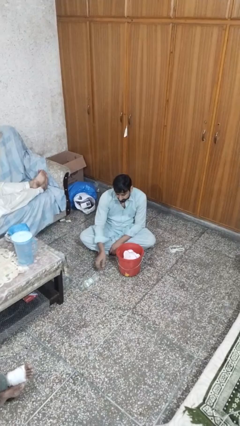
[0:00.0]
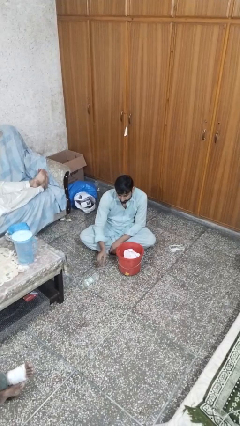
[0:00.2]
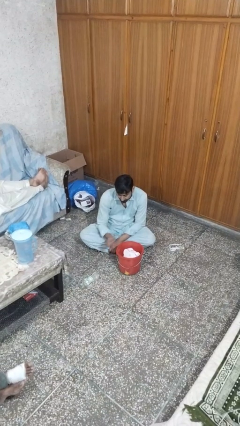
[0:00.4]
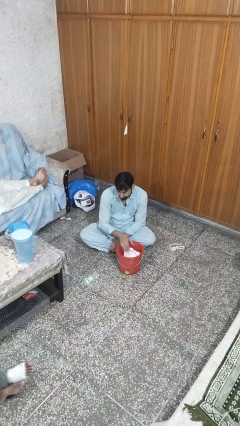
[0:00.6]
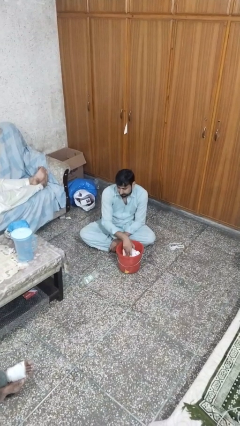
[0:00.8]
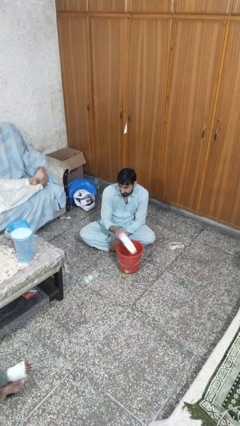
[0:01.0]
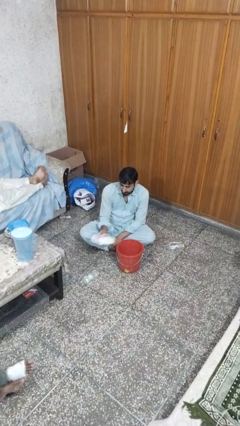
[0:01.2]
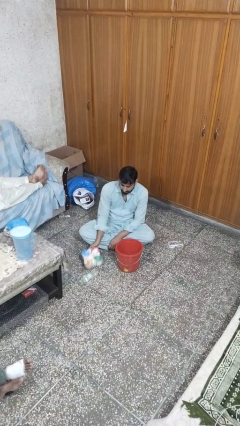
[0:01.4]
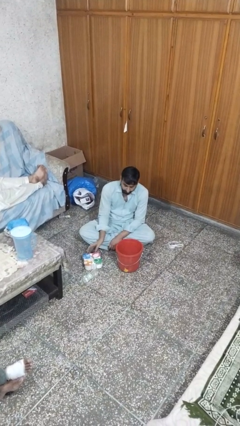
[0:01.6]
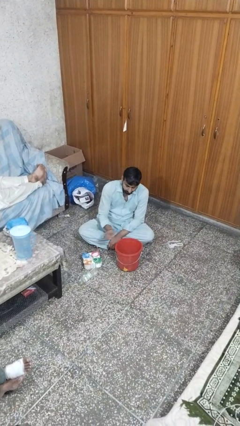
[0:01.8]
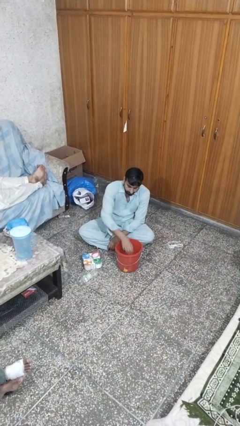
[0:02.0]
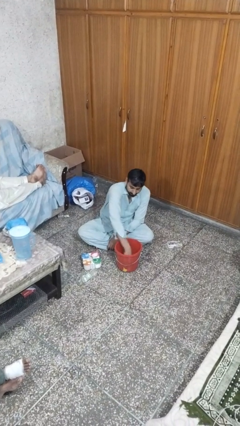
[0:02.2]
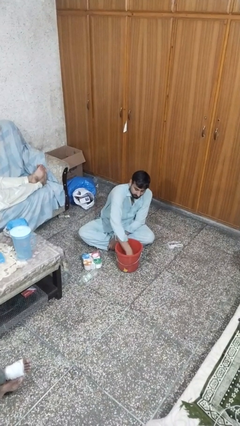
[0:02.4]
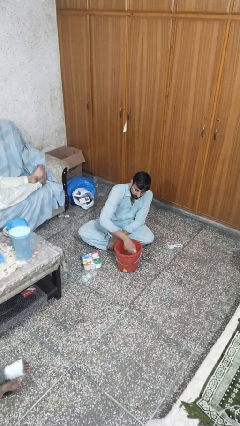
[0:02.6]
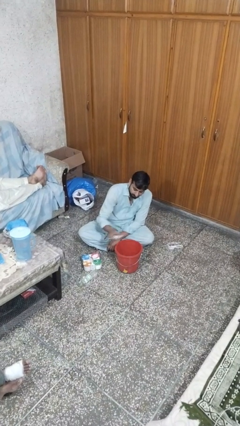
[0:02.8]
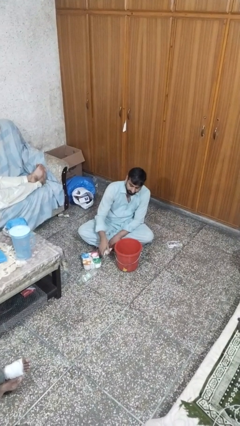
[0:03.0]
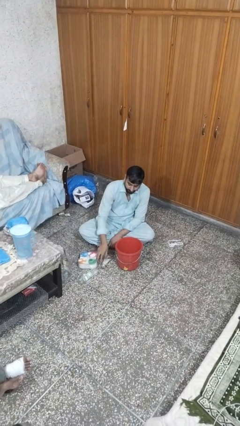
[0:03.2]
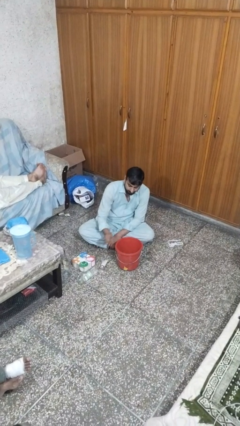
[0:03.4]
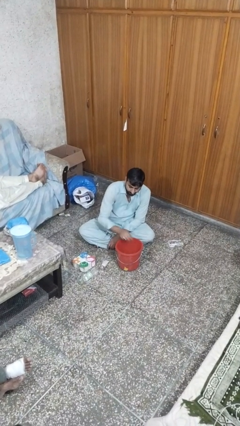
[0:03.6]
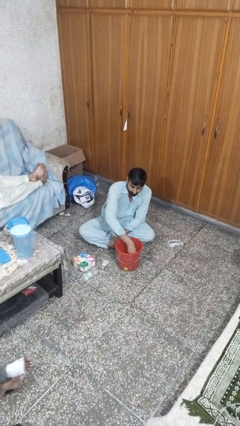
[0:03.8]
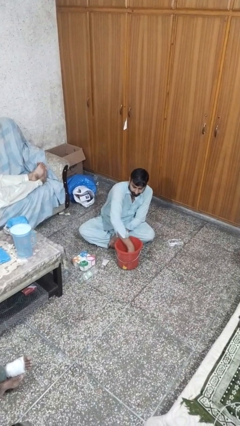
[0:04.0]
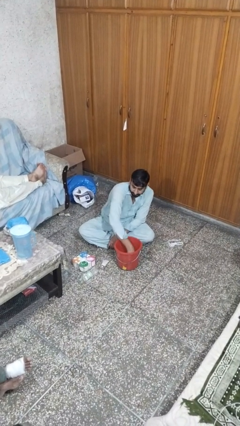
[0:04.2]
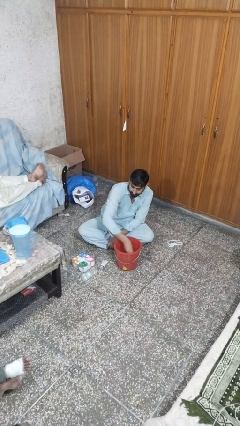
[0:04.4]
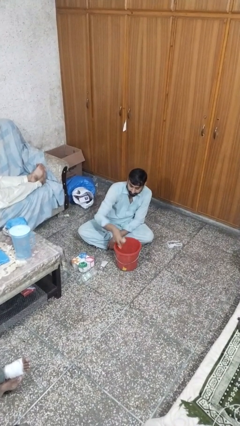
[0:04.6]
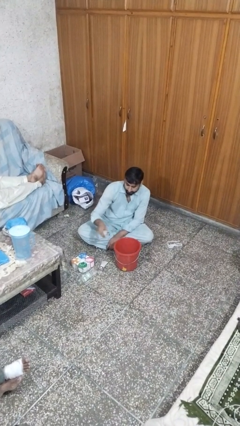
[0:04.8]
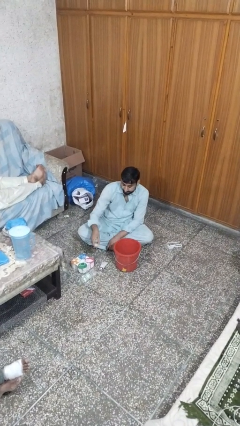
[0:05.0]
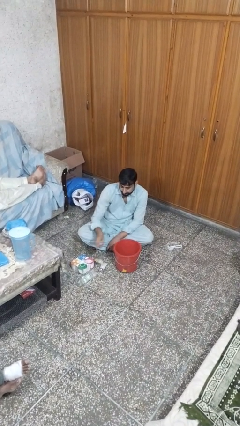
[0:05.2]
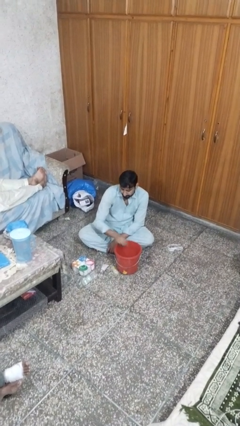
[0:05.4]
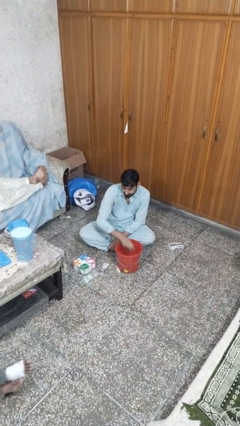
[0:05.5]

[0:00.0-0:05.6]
person takes object from basket

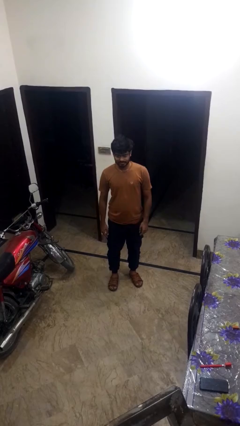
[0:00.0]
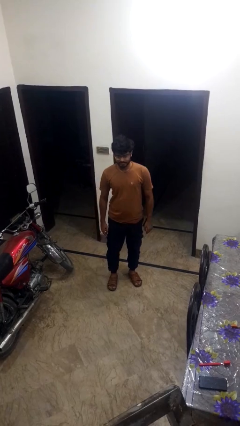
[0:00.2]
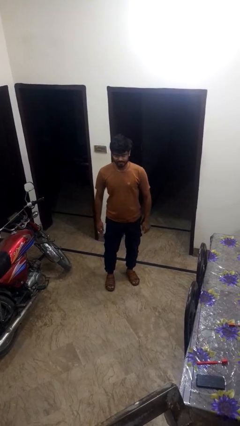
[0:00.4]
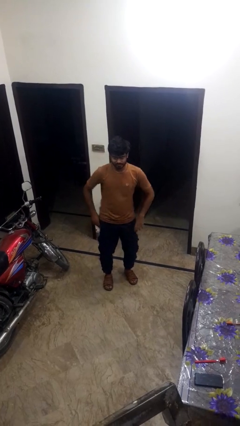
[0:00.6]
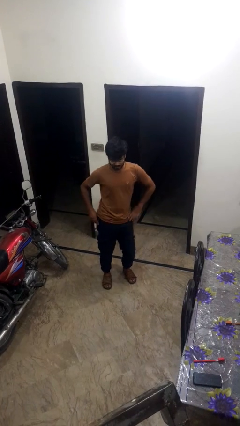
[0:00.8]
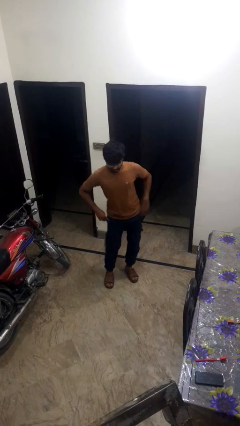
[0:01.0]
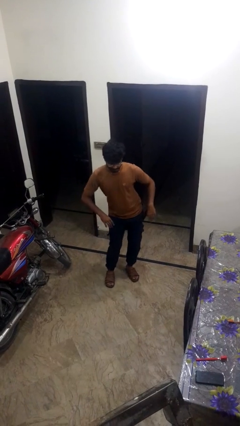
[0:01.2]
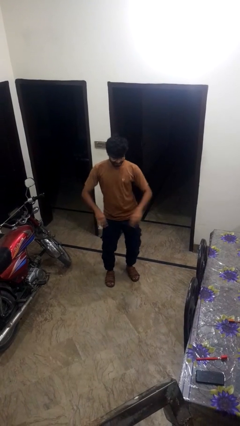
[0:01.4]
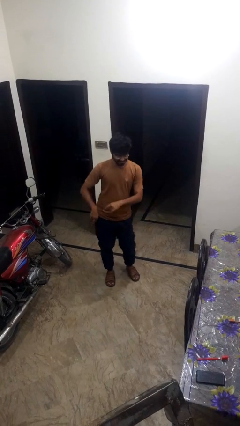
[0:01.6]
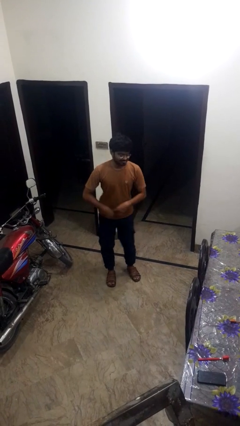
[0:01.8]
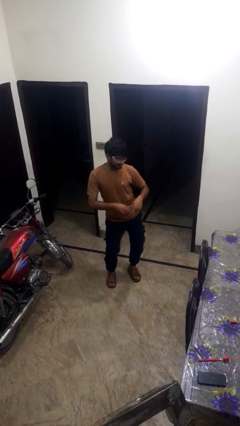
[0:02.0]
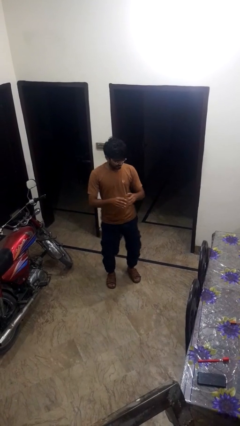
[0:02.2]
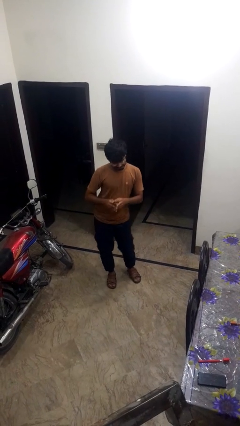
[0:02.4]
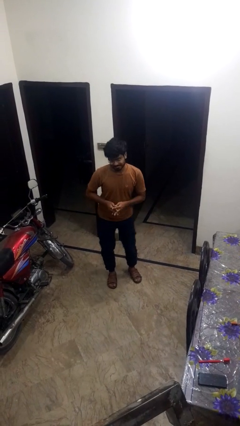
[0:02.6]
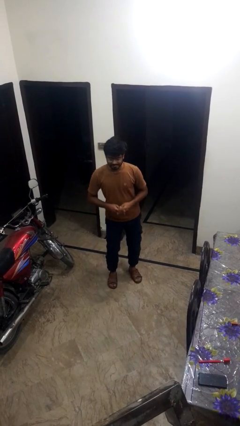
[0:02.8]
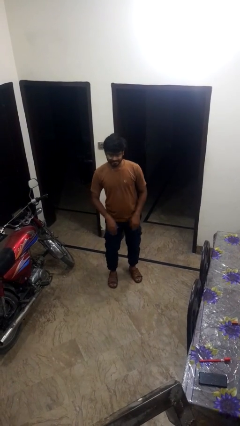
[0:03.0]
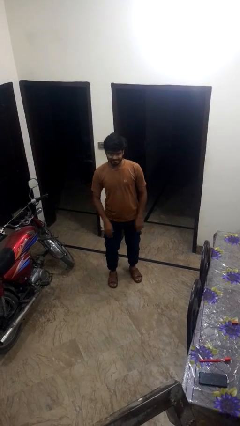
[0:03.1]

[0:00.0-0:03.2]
person wiggles hips

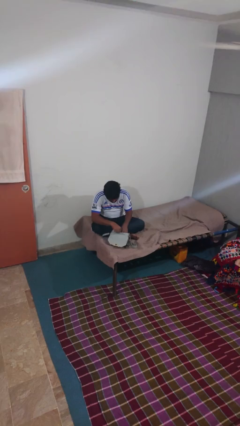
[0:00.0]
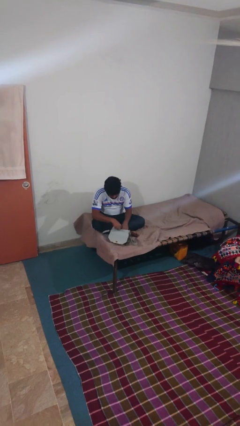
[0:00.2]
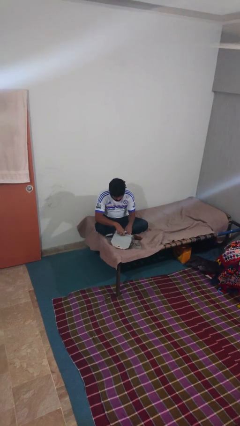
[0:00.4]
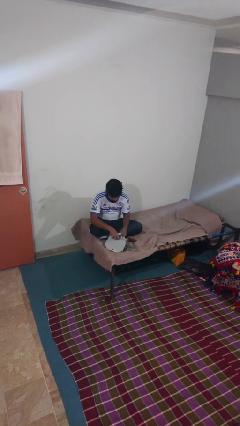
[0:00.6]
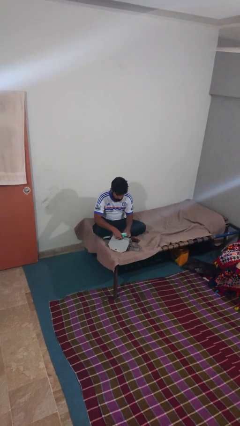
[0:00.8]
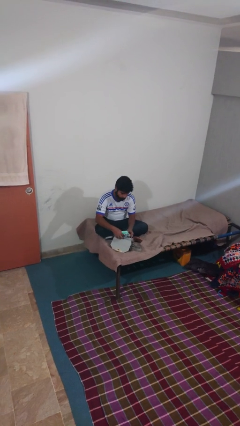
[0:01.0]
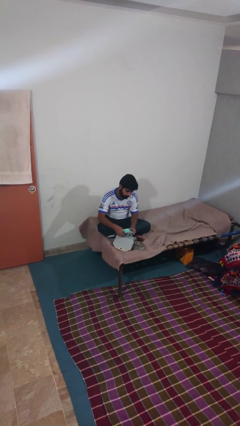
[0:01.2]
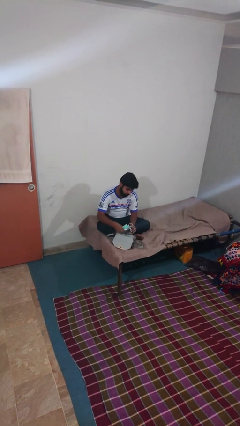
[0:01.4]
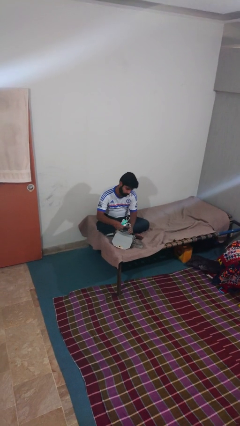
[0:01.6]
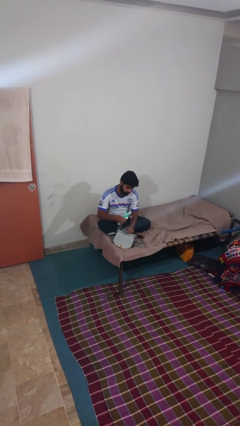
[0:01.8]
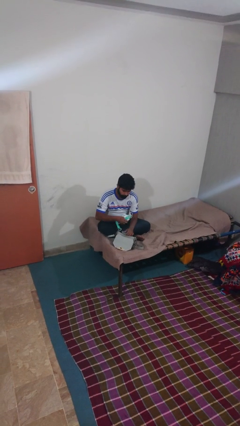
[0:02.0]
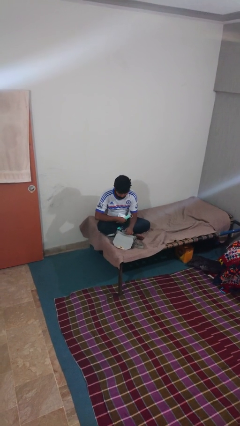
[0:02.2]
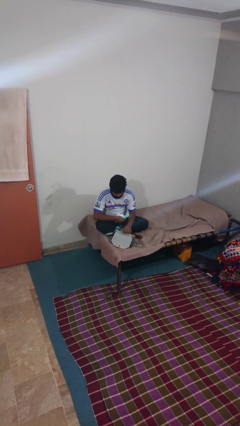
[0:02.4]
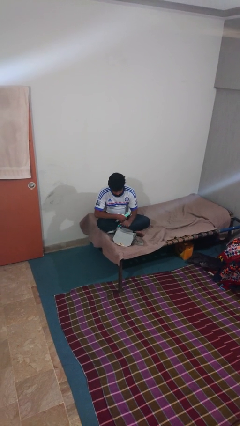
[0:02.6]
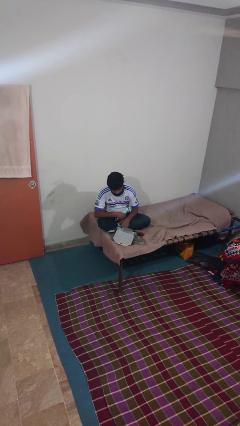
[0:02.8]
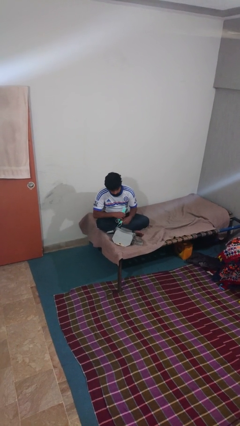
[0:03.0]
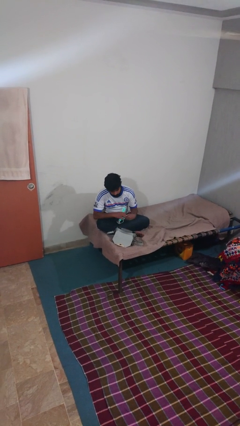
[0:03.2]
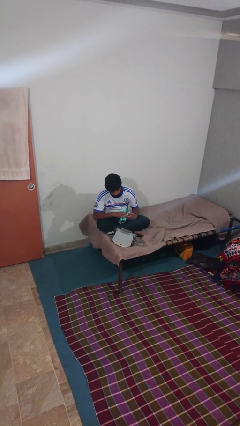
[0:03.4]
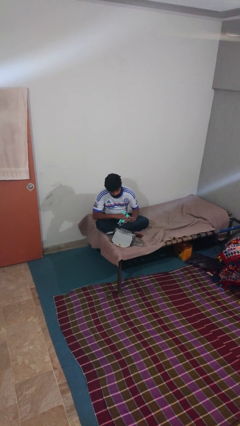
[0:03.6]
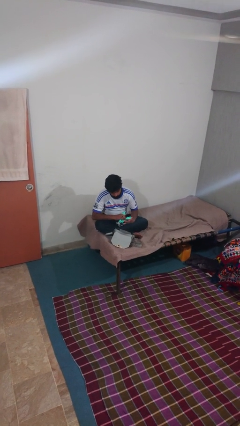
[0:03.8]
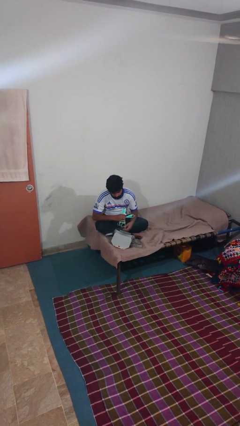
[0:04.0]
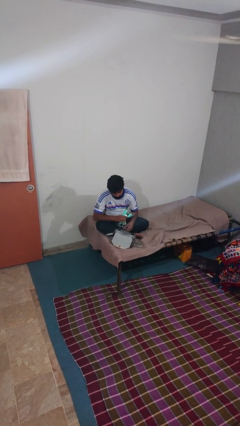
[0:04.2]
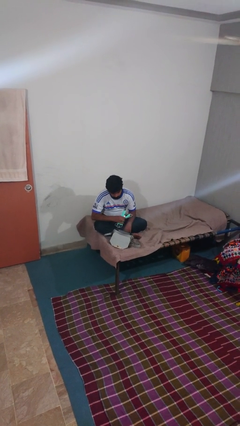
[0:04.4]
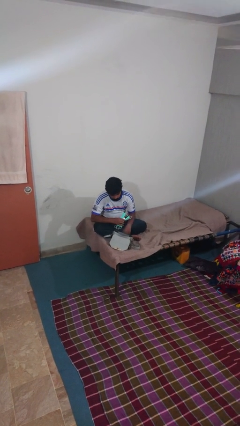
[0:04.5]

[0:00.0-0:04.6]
person takes object from purse

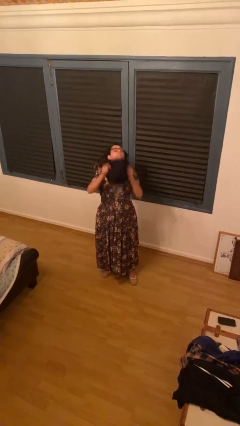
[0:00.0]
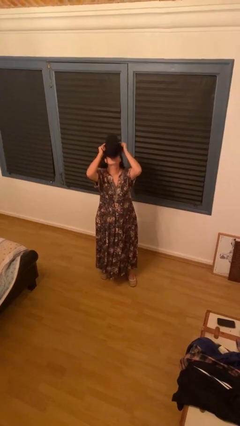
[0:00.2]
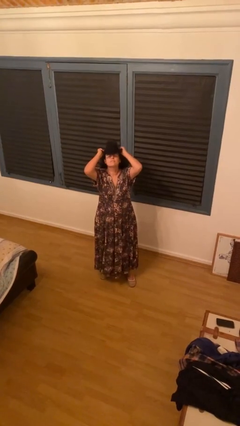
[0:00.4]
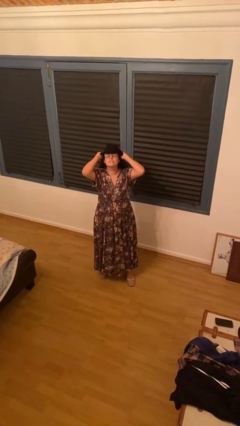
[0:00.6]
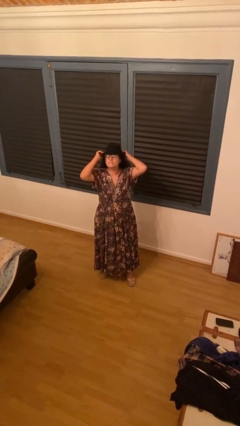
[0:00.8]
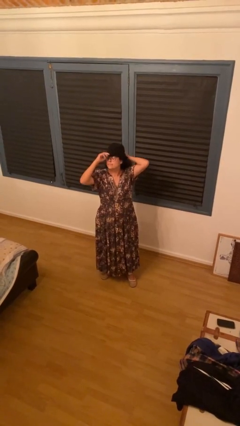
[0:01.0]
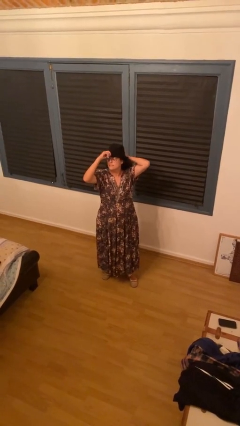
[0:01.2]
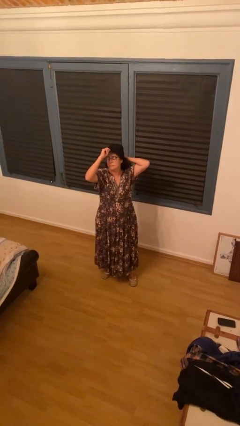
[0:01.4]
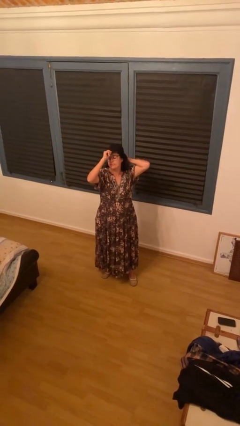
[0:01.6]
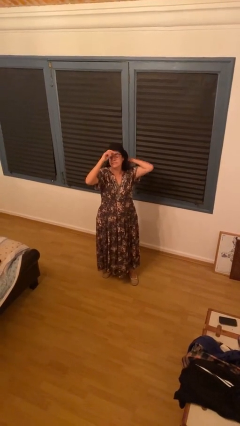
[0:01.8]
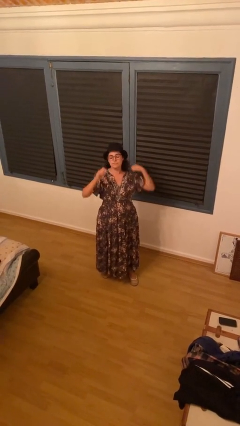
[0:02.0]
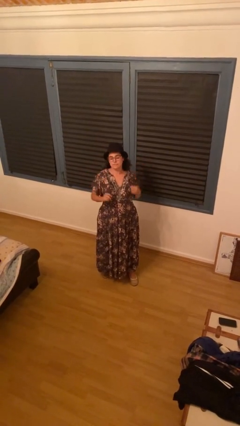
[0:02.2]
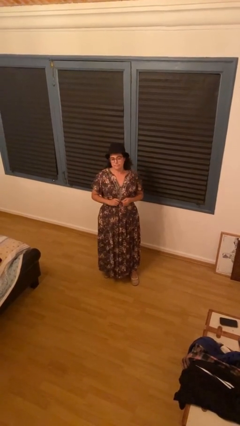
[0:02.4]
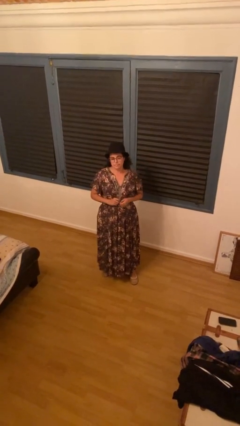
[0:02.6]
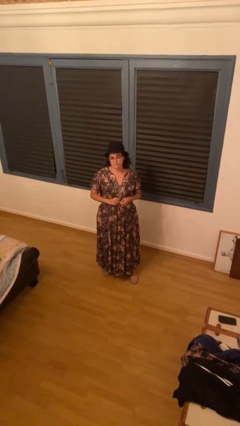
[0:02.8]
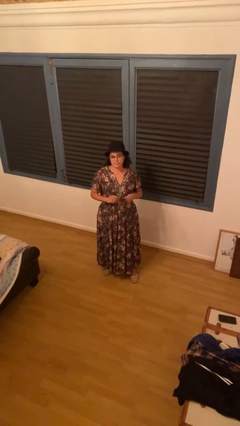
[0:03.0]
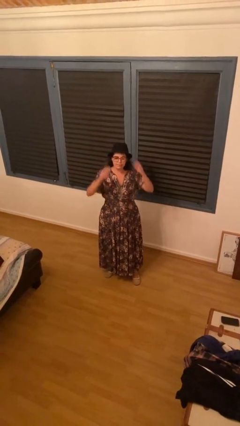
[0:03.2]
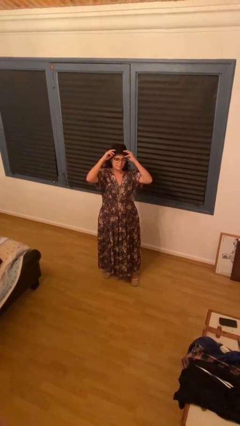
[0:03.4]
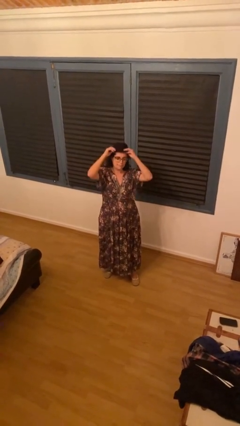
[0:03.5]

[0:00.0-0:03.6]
person puts on hat

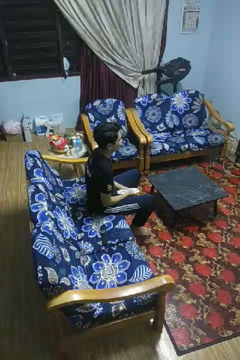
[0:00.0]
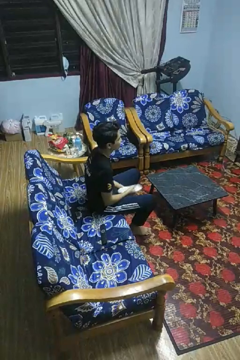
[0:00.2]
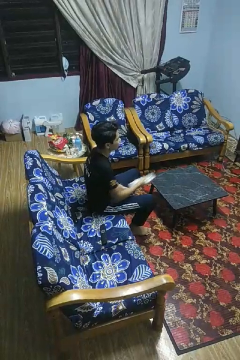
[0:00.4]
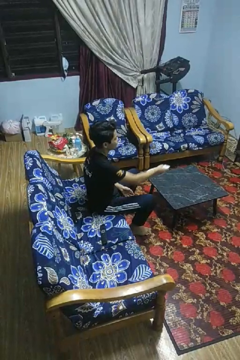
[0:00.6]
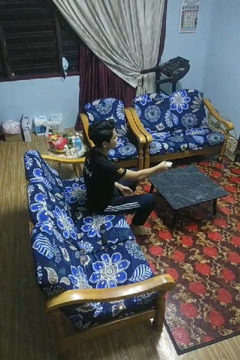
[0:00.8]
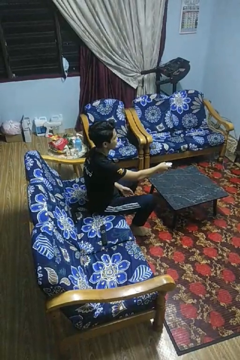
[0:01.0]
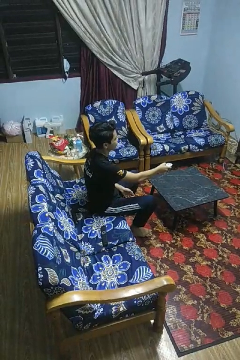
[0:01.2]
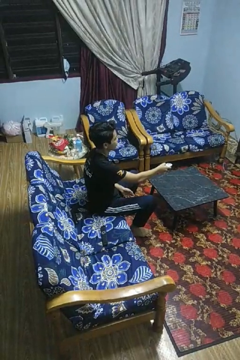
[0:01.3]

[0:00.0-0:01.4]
person uses television remote
